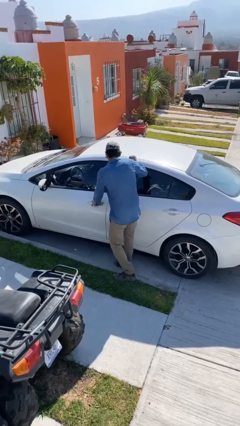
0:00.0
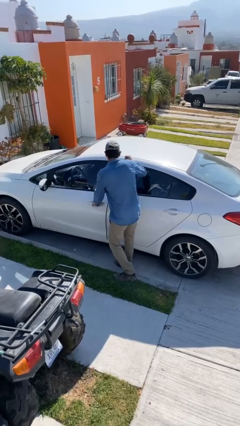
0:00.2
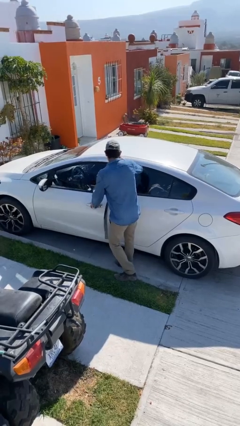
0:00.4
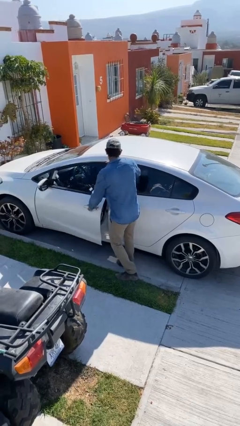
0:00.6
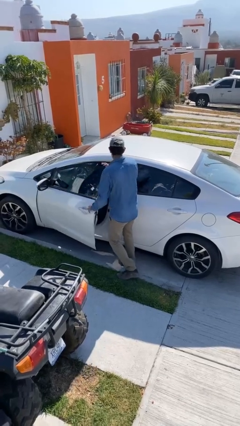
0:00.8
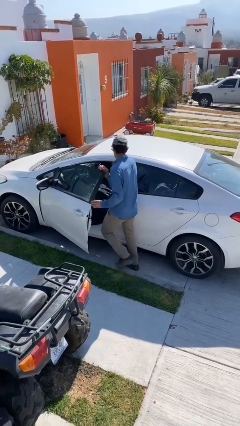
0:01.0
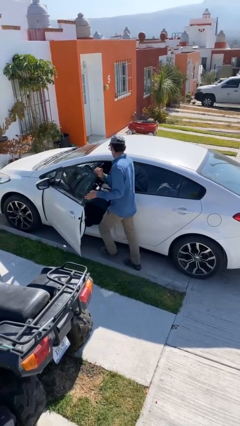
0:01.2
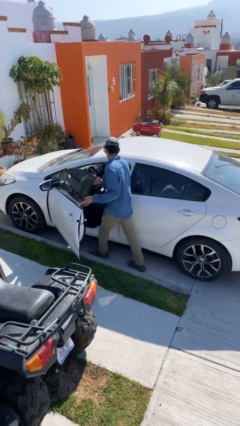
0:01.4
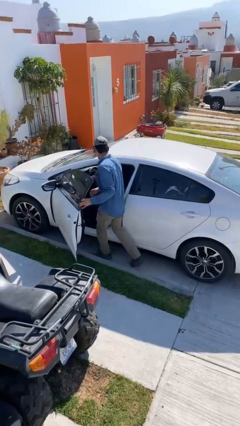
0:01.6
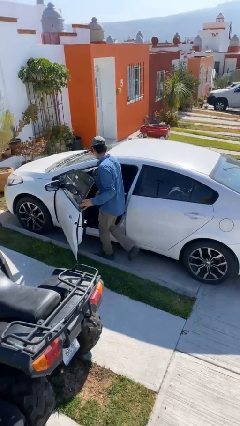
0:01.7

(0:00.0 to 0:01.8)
person opens car door

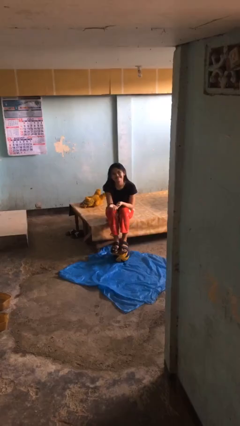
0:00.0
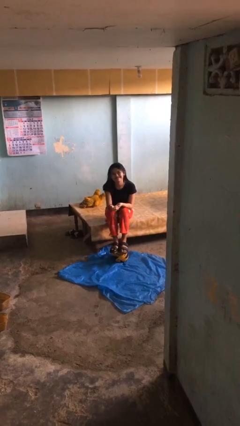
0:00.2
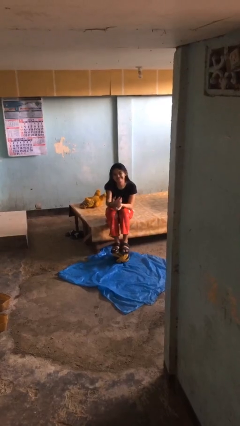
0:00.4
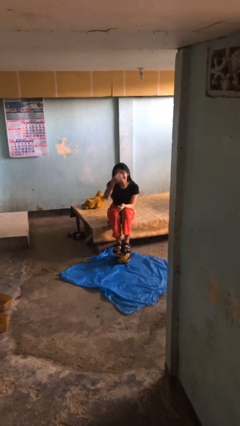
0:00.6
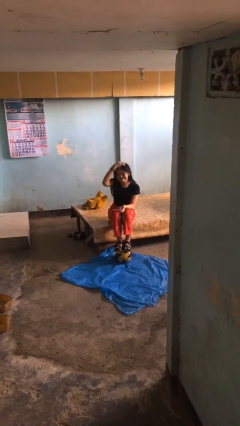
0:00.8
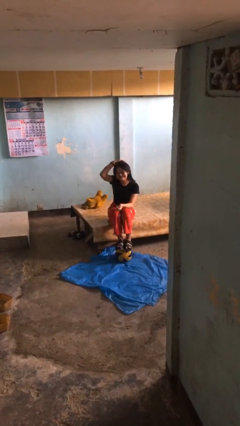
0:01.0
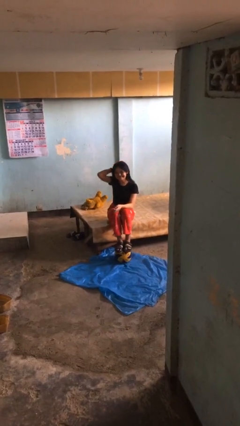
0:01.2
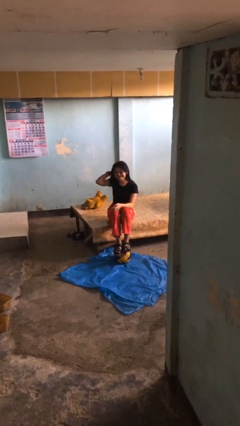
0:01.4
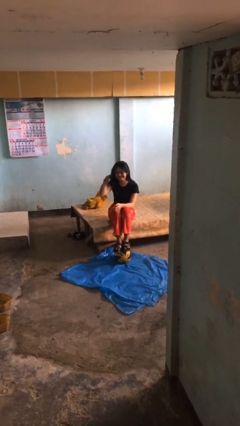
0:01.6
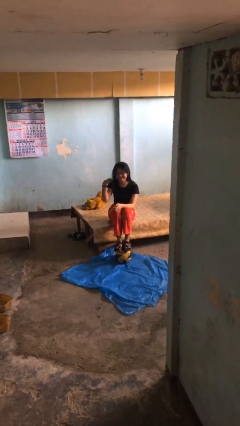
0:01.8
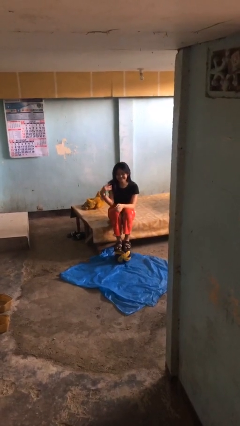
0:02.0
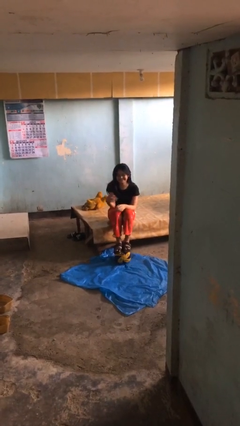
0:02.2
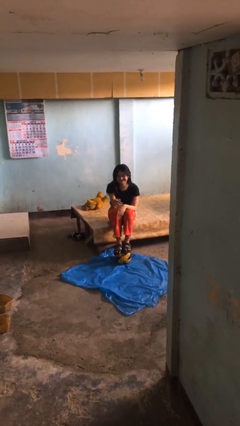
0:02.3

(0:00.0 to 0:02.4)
person strokes hair

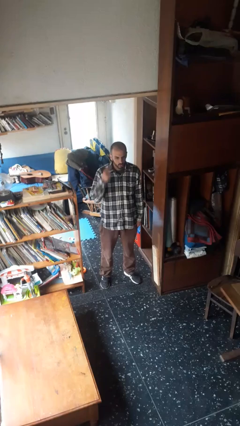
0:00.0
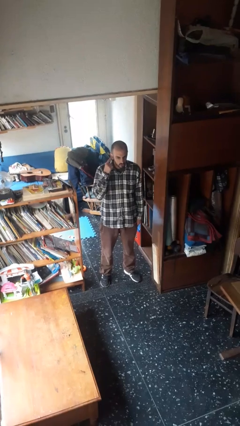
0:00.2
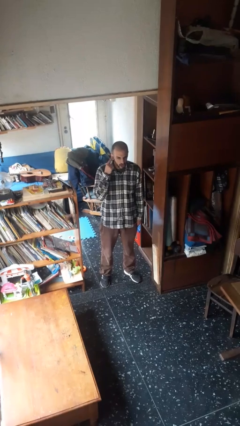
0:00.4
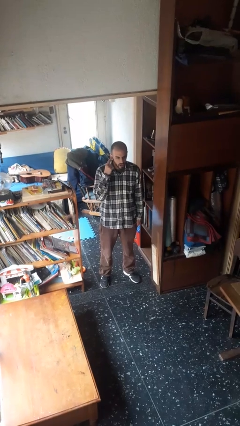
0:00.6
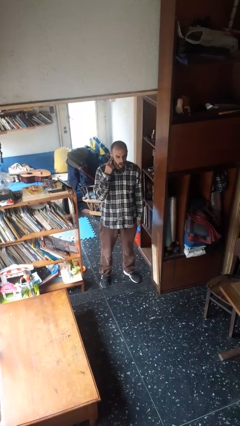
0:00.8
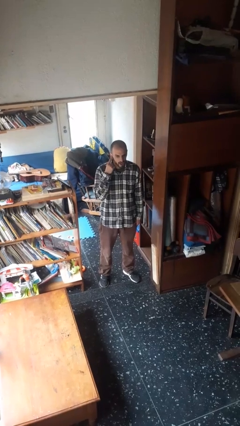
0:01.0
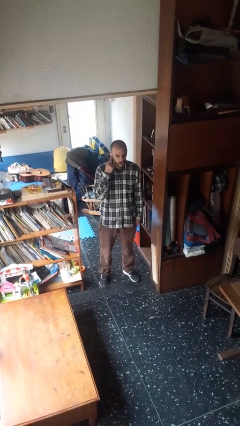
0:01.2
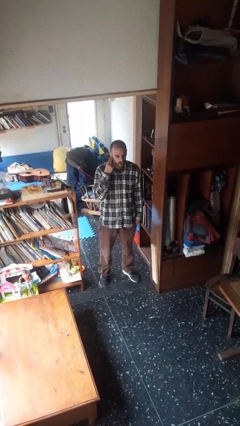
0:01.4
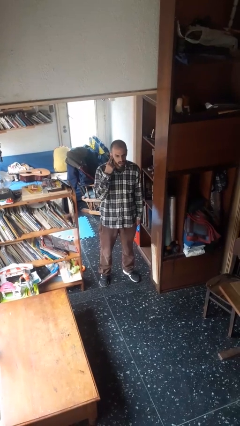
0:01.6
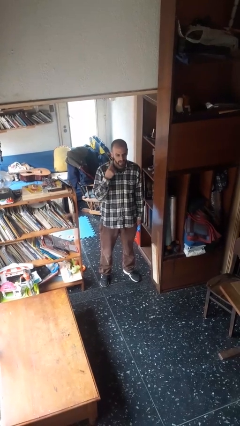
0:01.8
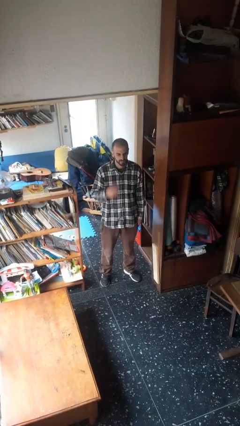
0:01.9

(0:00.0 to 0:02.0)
person gestures listen closely

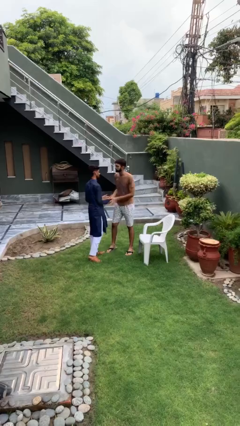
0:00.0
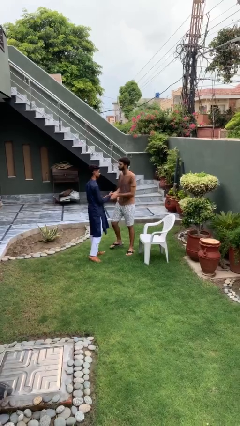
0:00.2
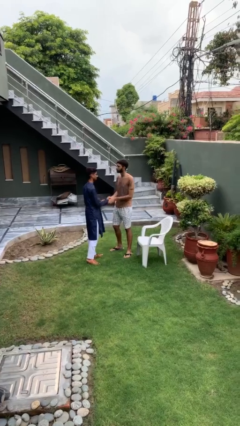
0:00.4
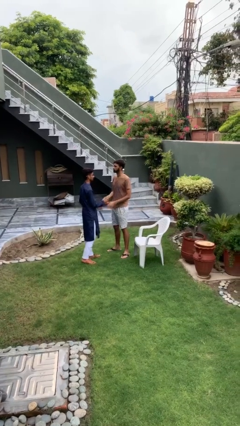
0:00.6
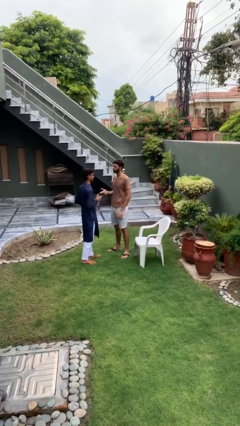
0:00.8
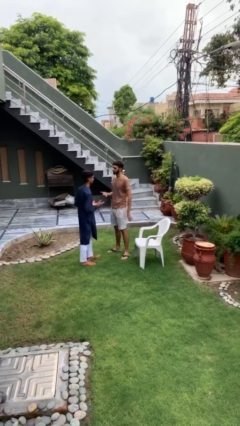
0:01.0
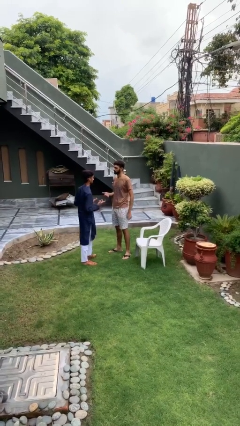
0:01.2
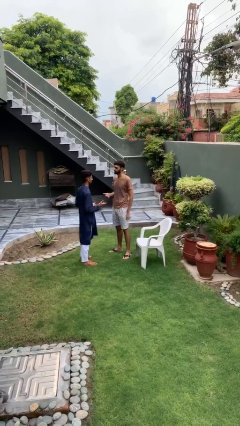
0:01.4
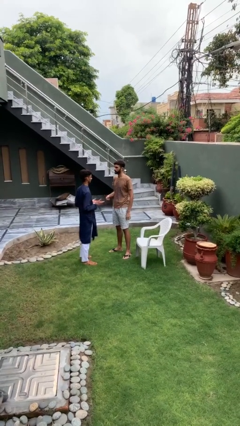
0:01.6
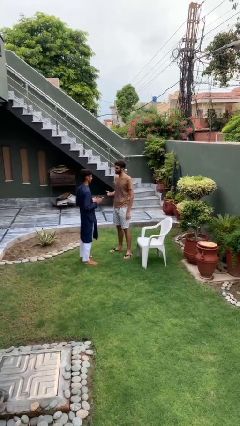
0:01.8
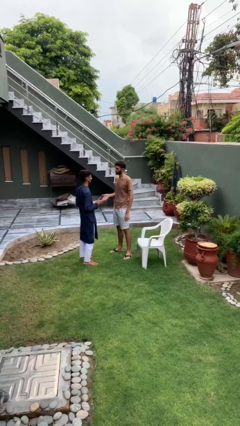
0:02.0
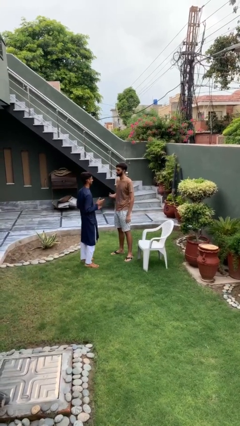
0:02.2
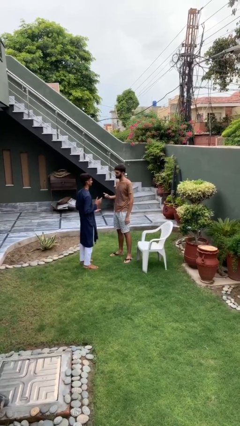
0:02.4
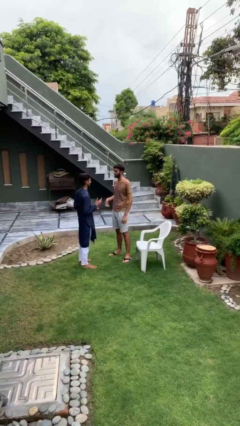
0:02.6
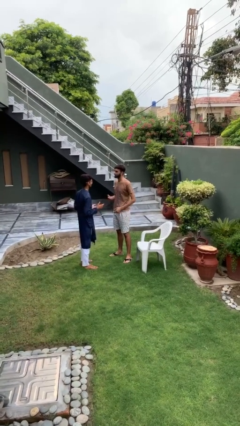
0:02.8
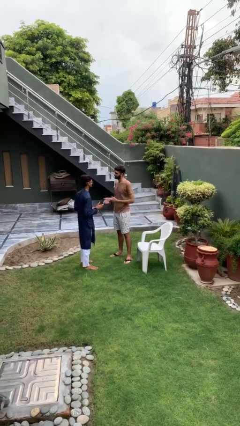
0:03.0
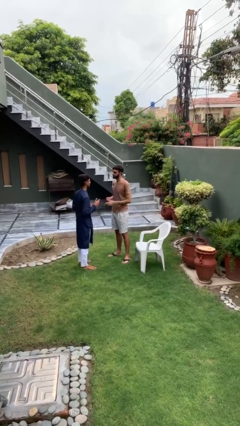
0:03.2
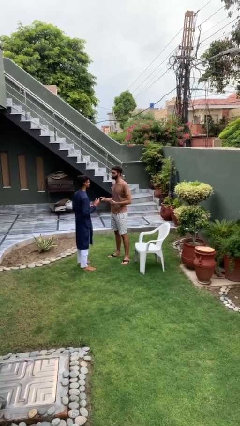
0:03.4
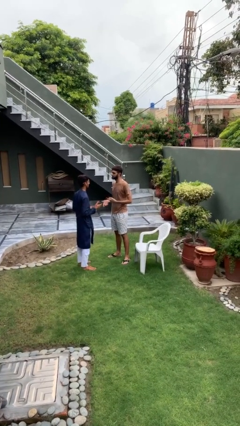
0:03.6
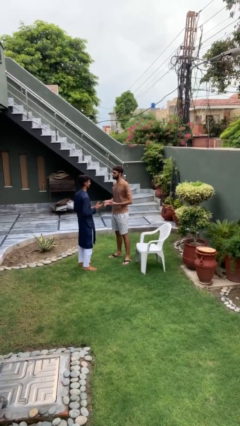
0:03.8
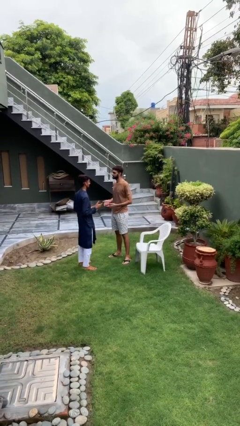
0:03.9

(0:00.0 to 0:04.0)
person talks to person

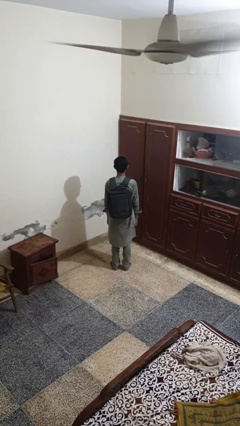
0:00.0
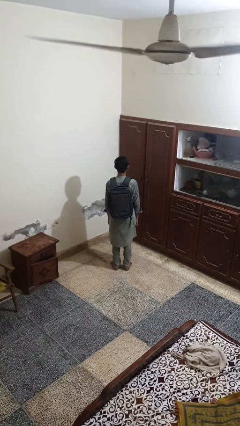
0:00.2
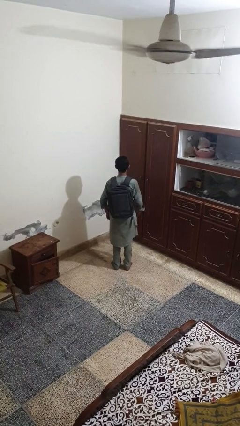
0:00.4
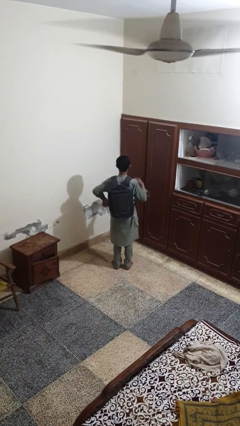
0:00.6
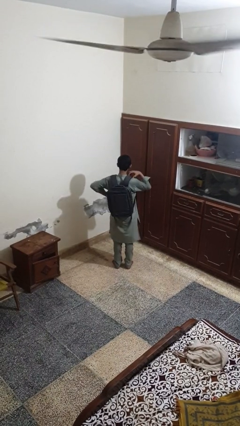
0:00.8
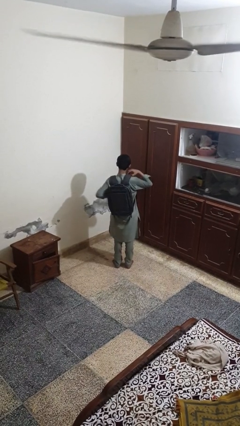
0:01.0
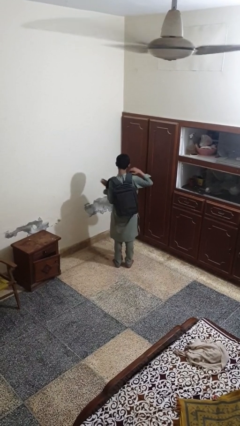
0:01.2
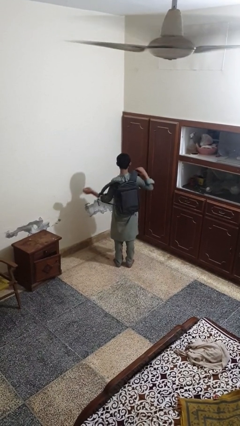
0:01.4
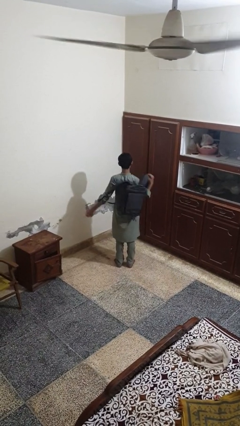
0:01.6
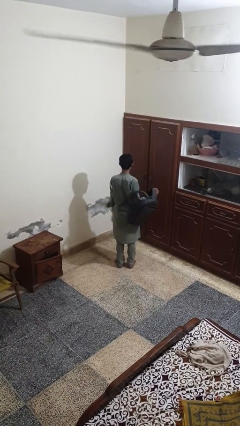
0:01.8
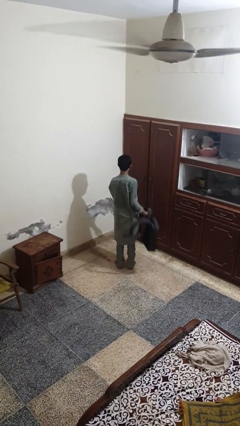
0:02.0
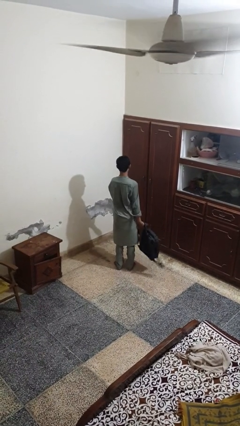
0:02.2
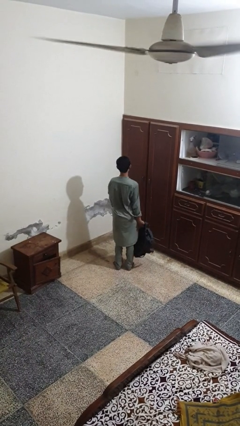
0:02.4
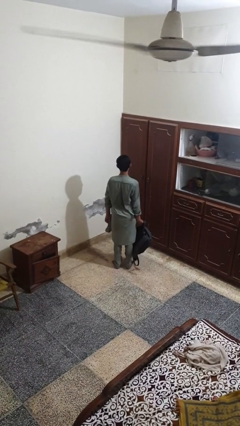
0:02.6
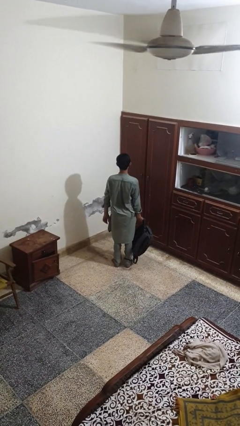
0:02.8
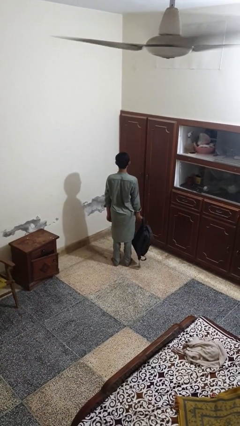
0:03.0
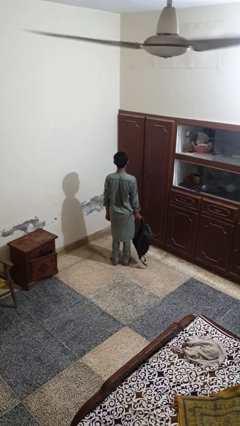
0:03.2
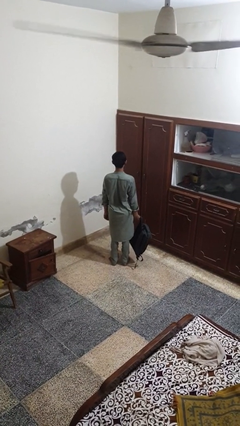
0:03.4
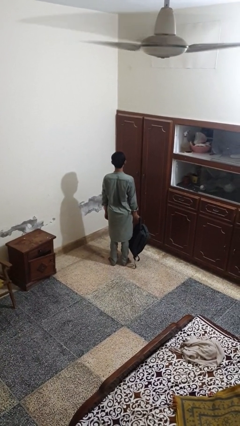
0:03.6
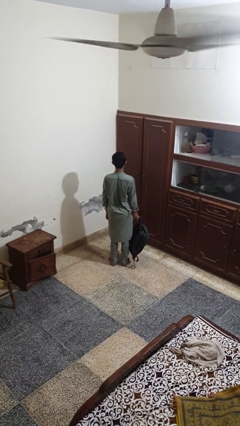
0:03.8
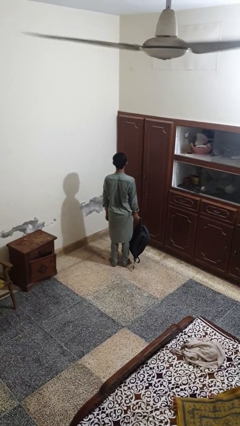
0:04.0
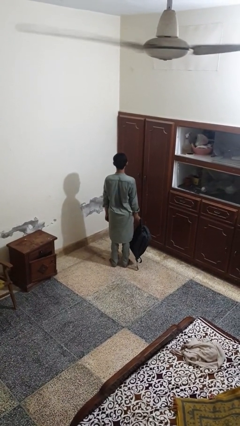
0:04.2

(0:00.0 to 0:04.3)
person takes off backpack

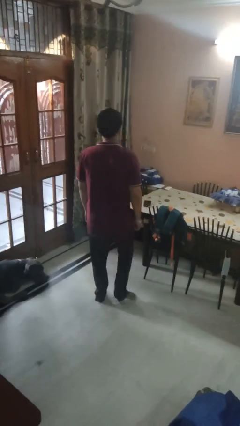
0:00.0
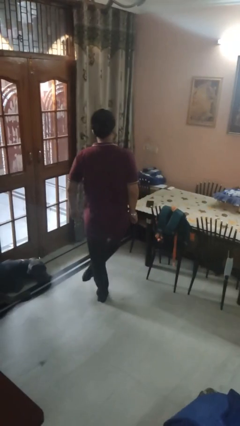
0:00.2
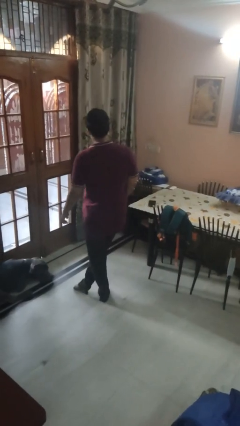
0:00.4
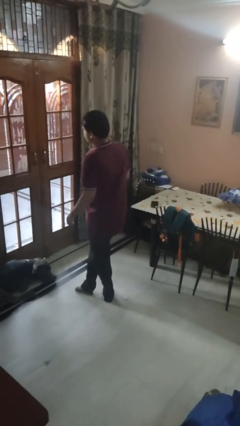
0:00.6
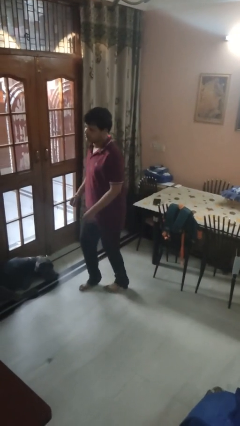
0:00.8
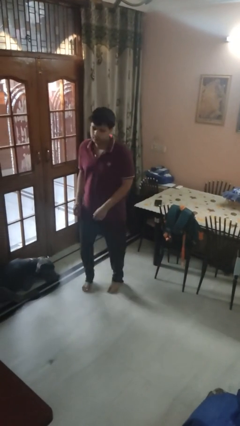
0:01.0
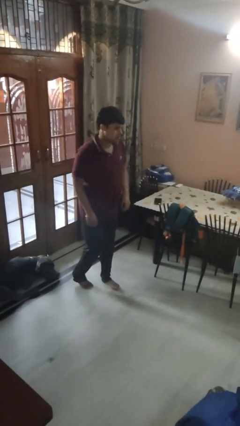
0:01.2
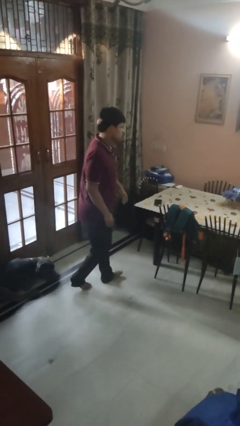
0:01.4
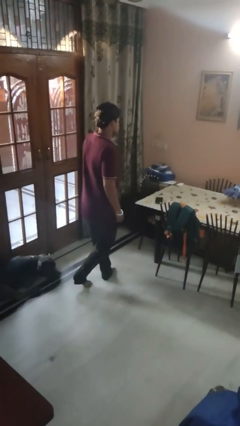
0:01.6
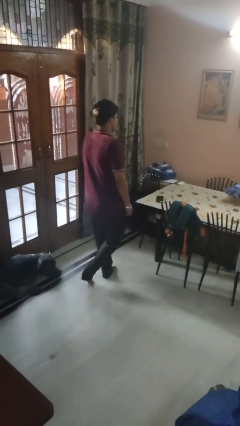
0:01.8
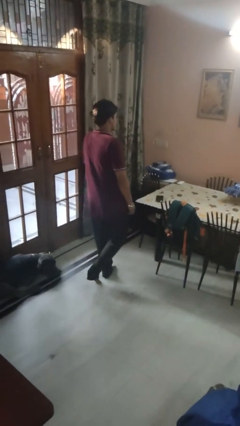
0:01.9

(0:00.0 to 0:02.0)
person twirls

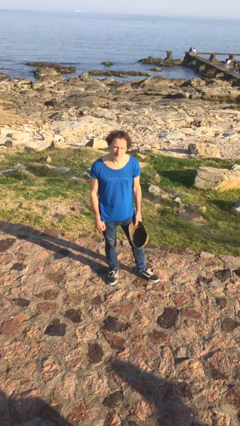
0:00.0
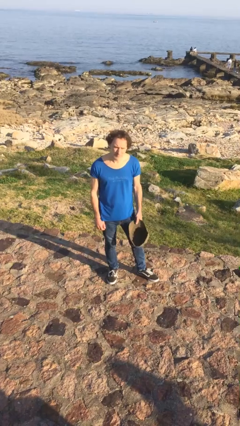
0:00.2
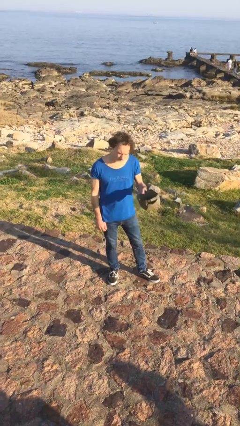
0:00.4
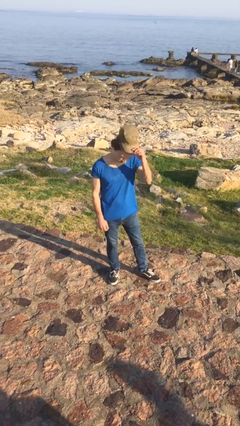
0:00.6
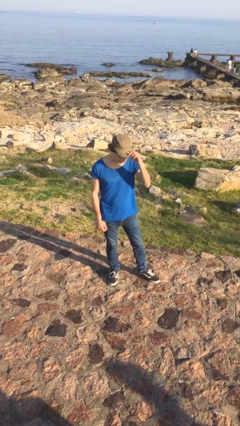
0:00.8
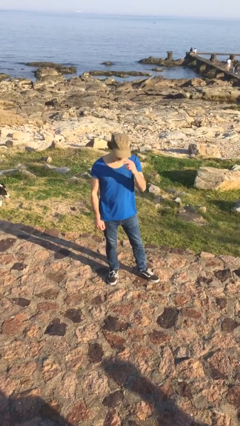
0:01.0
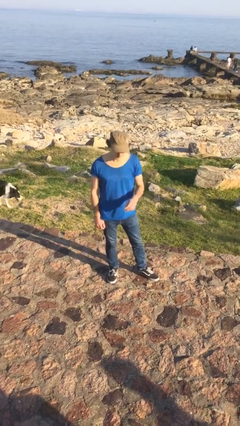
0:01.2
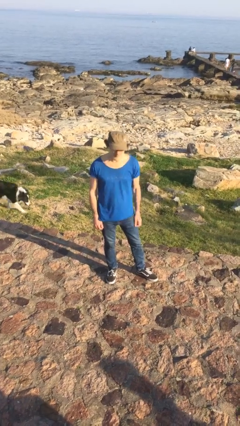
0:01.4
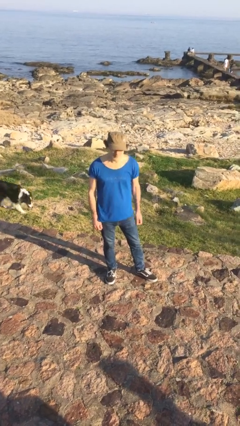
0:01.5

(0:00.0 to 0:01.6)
person puts on hat
